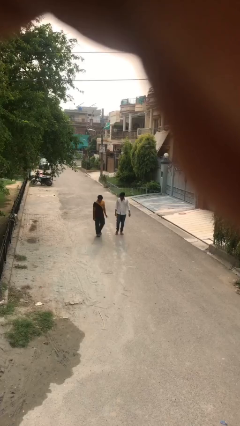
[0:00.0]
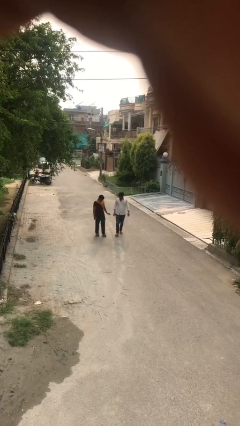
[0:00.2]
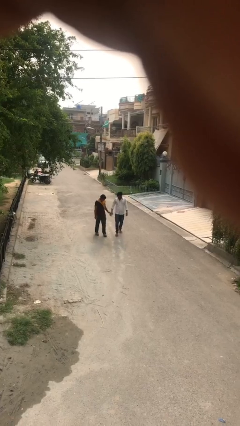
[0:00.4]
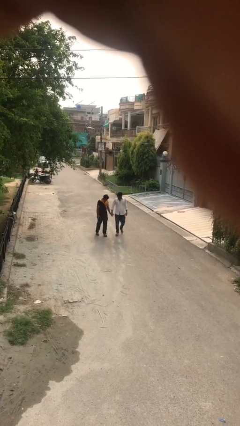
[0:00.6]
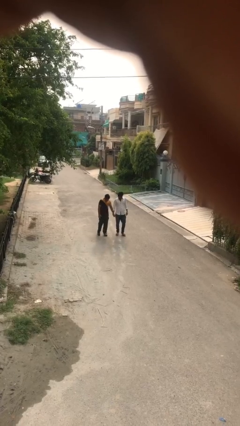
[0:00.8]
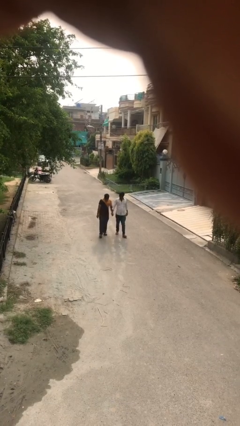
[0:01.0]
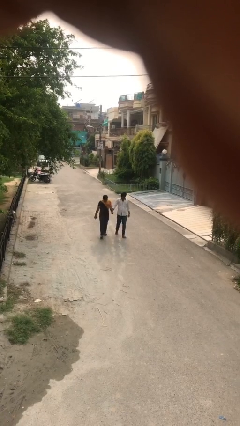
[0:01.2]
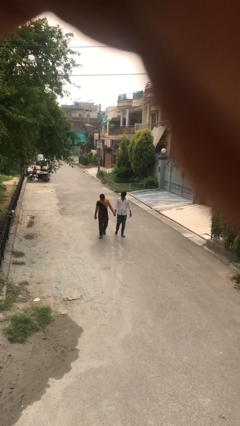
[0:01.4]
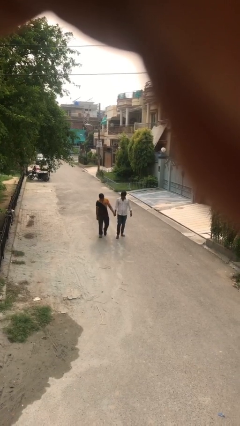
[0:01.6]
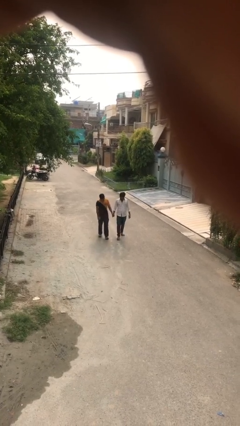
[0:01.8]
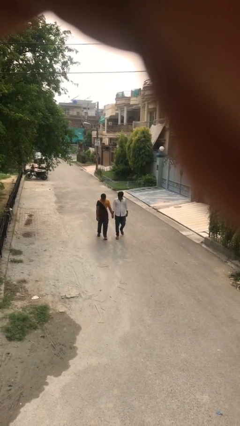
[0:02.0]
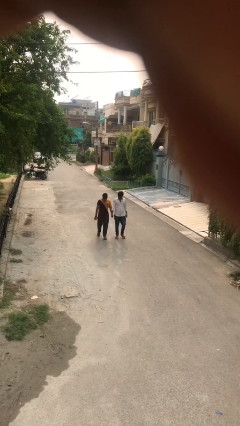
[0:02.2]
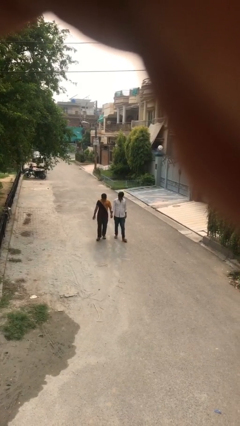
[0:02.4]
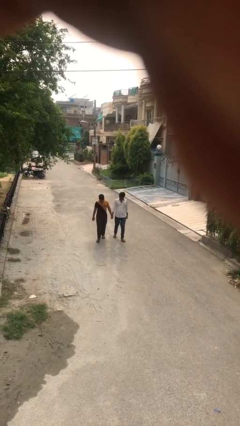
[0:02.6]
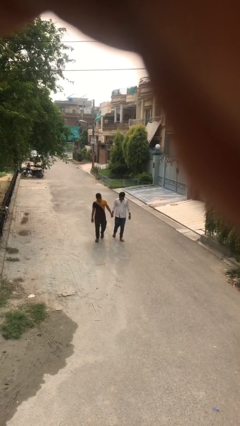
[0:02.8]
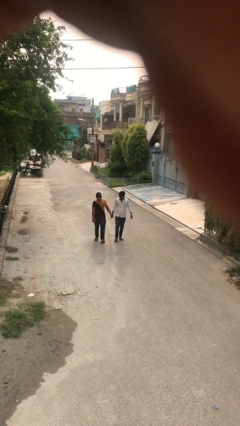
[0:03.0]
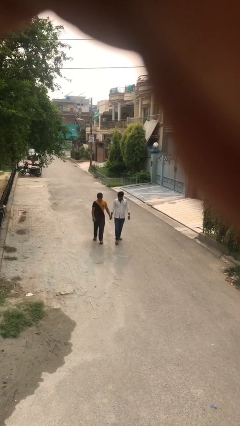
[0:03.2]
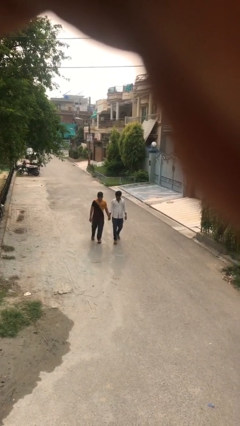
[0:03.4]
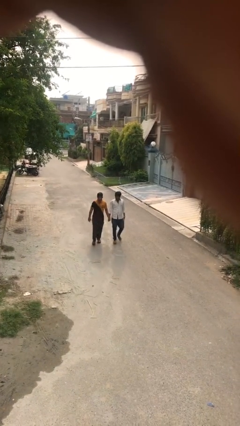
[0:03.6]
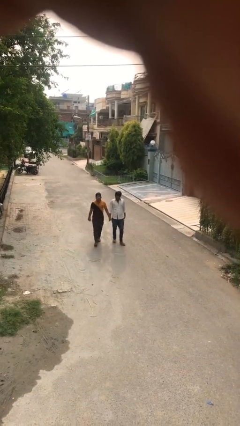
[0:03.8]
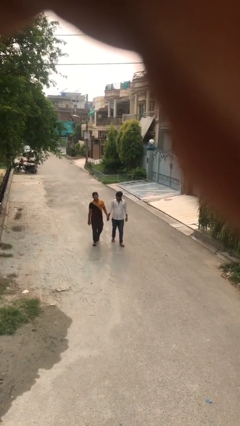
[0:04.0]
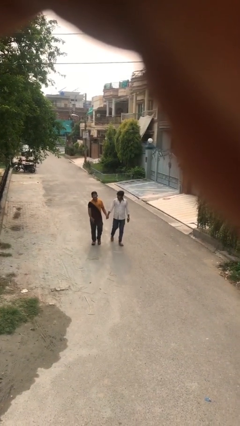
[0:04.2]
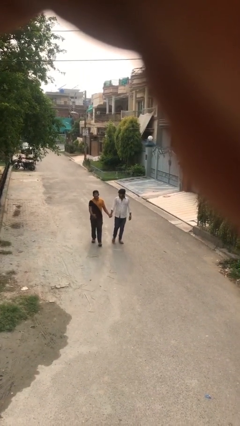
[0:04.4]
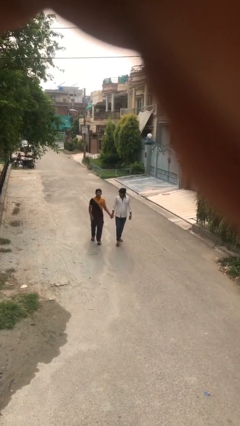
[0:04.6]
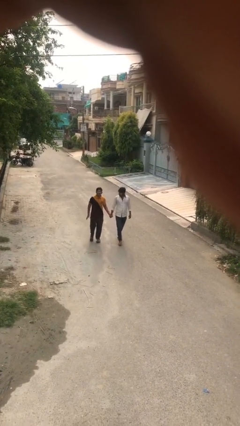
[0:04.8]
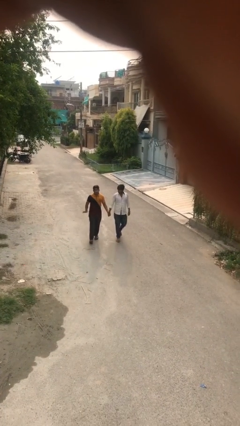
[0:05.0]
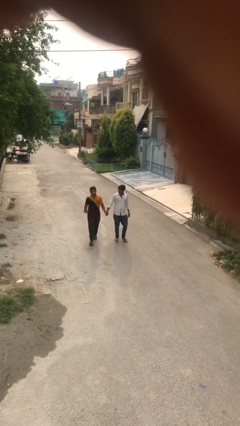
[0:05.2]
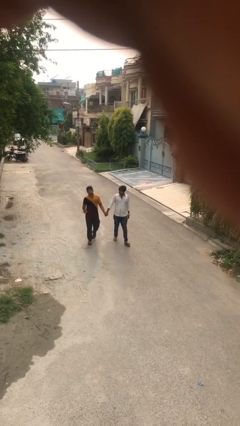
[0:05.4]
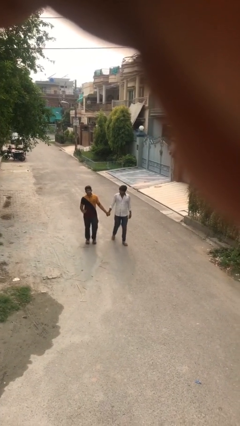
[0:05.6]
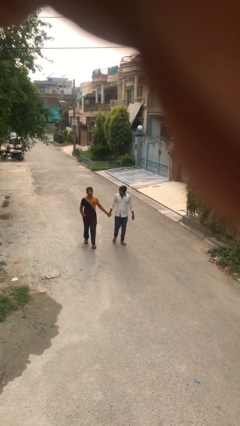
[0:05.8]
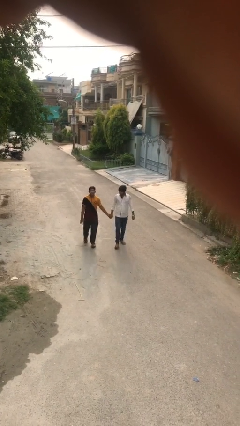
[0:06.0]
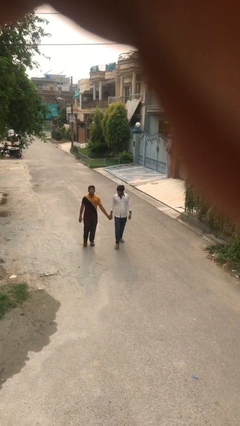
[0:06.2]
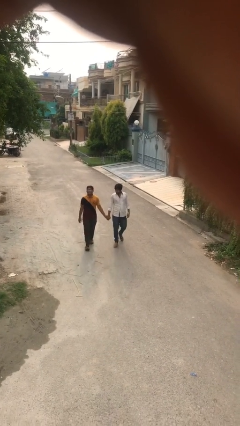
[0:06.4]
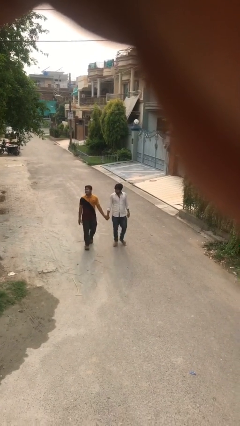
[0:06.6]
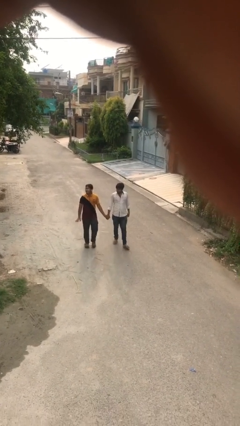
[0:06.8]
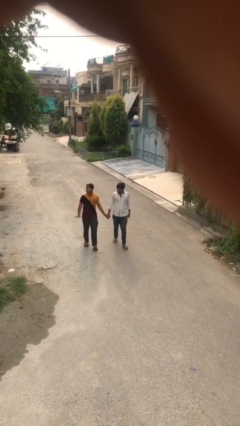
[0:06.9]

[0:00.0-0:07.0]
person holds hand

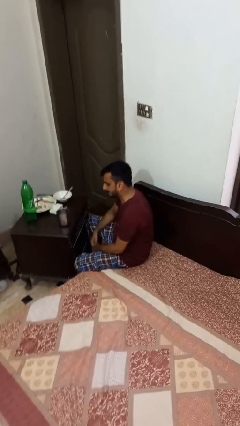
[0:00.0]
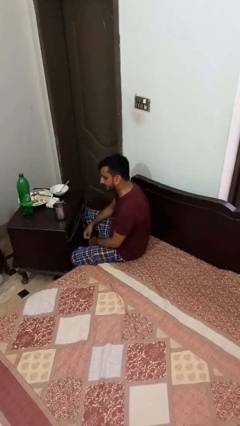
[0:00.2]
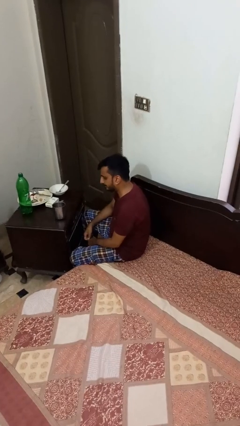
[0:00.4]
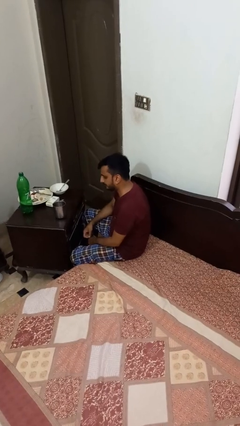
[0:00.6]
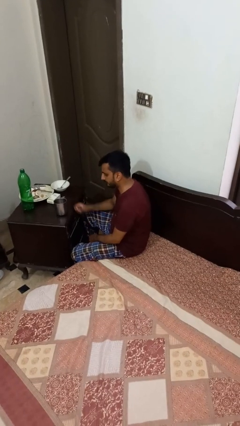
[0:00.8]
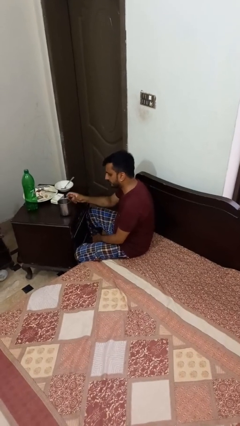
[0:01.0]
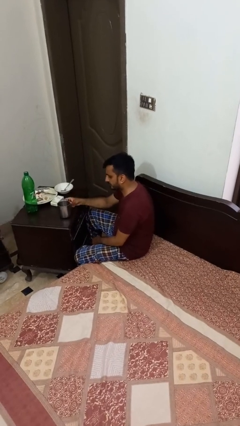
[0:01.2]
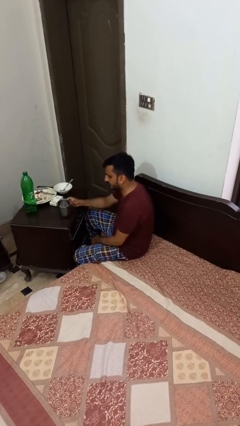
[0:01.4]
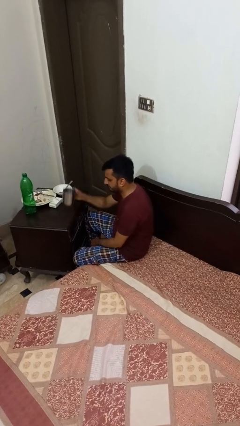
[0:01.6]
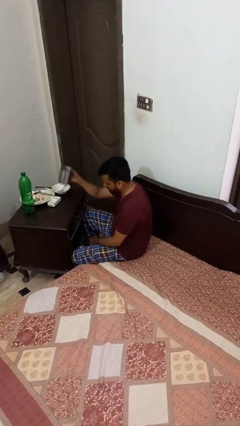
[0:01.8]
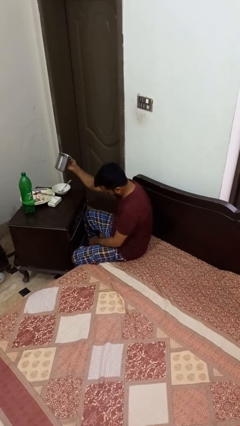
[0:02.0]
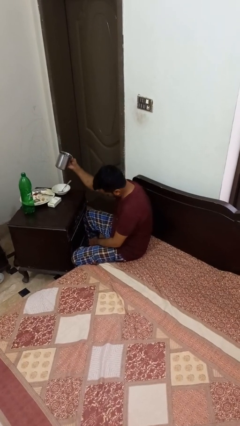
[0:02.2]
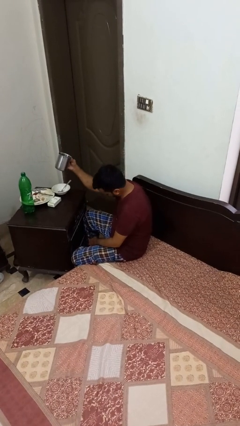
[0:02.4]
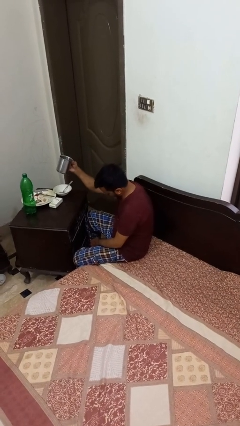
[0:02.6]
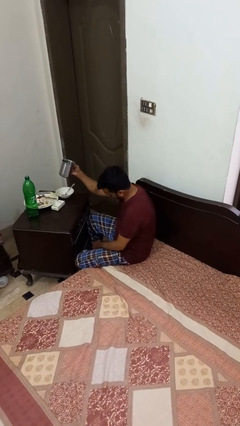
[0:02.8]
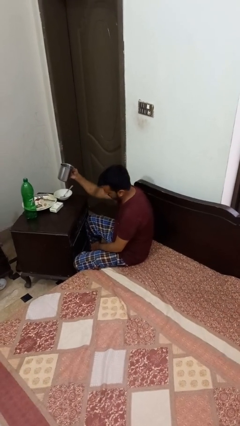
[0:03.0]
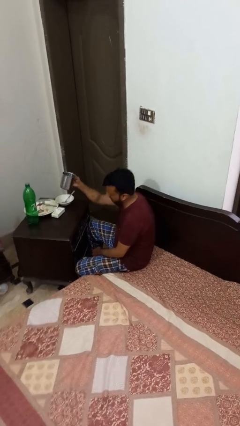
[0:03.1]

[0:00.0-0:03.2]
person picks up object from table

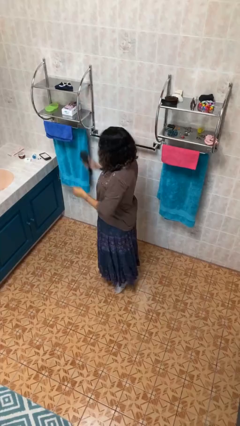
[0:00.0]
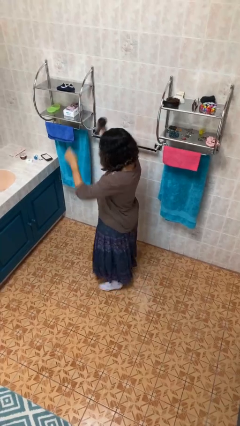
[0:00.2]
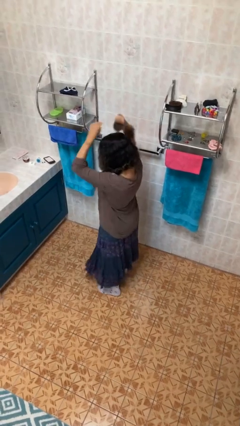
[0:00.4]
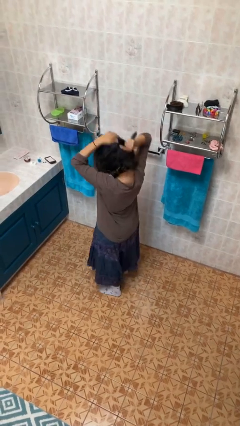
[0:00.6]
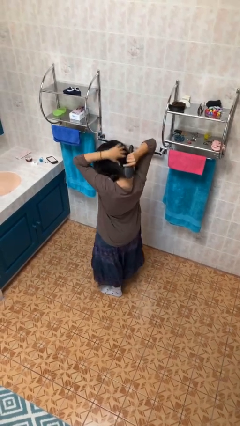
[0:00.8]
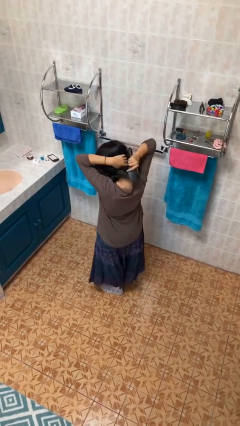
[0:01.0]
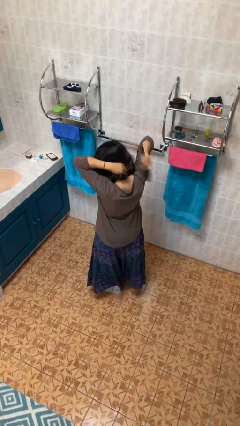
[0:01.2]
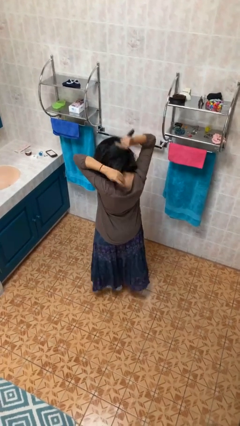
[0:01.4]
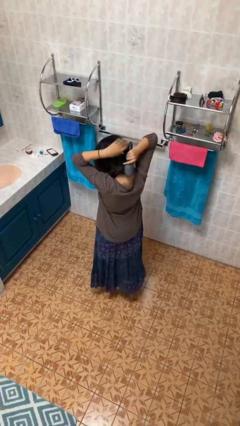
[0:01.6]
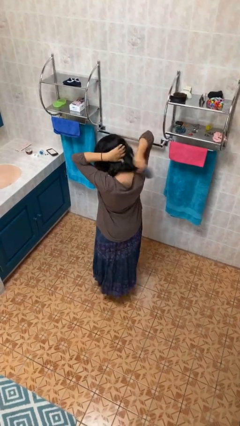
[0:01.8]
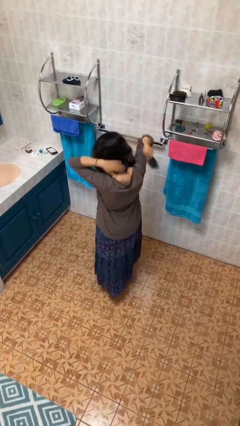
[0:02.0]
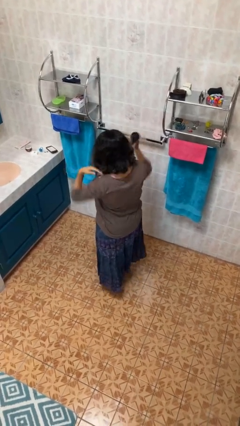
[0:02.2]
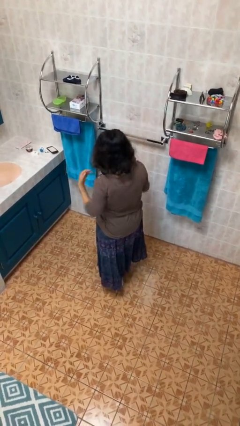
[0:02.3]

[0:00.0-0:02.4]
person brushes hair

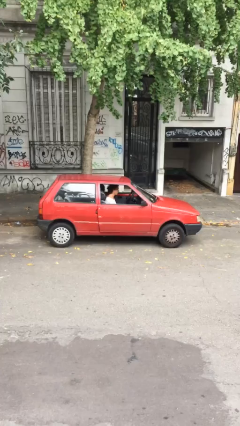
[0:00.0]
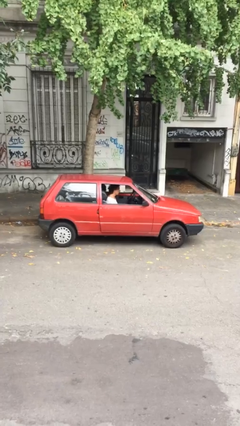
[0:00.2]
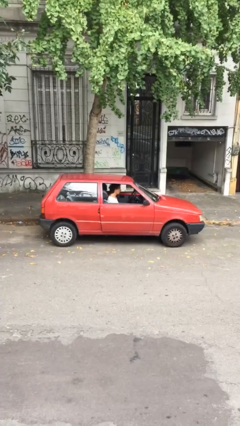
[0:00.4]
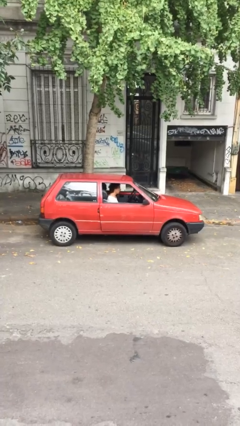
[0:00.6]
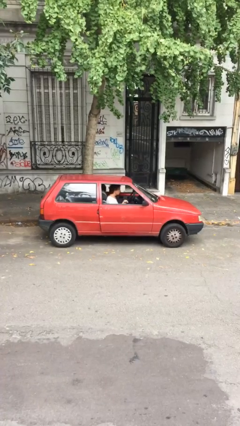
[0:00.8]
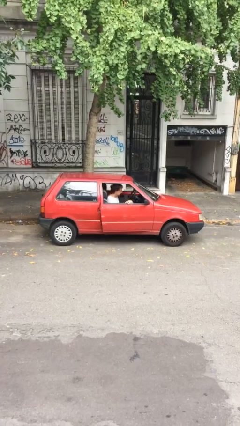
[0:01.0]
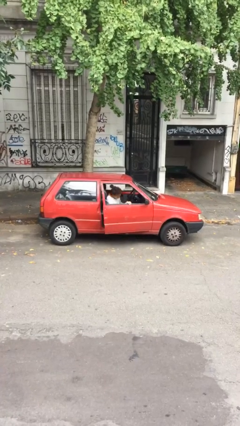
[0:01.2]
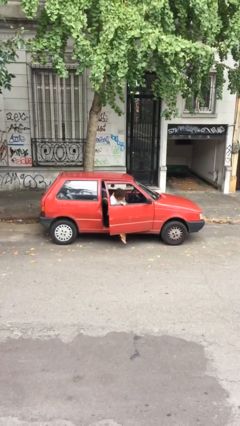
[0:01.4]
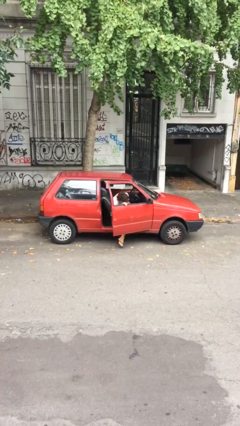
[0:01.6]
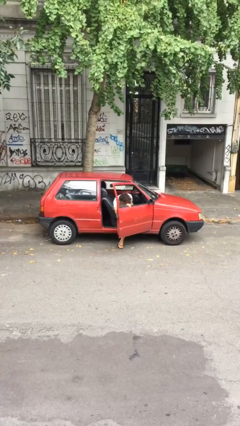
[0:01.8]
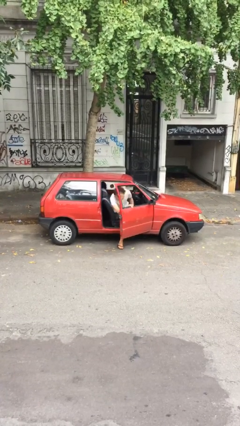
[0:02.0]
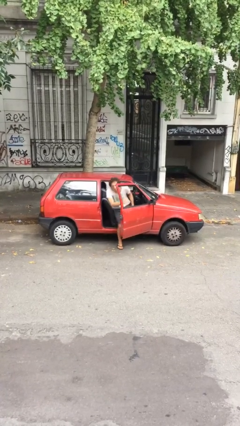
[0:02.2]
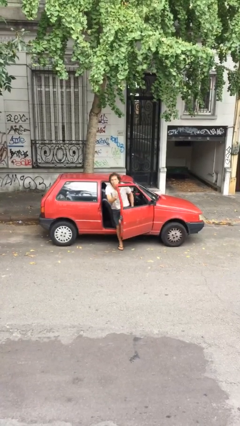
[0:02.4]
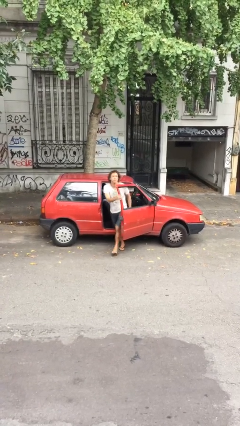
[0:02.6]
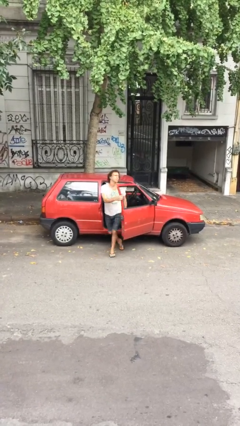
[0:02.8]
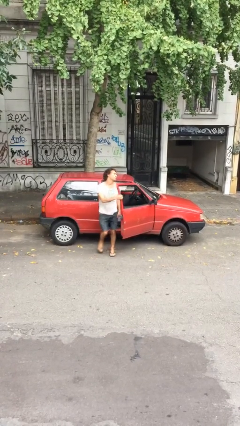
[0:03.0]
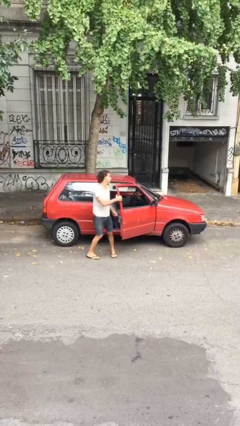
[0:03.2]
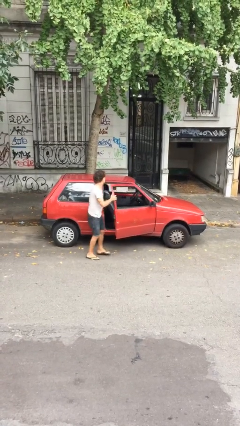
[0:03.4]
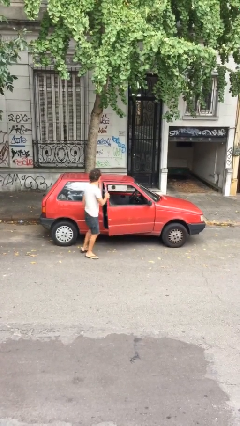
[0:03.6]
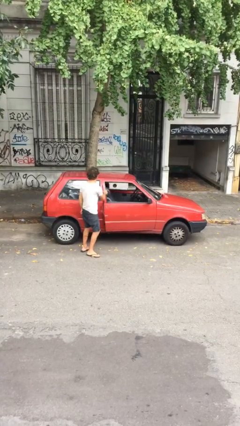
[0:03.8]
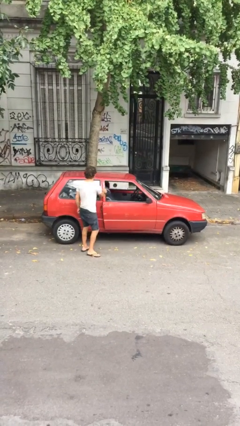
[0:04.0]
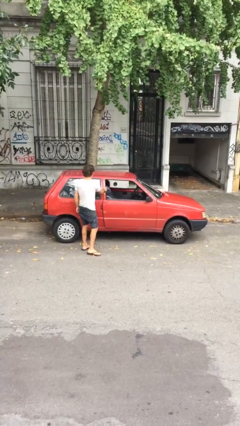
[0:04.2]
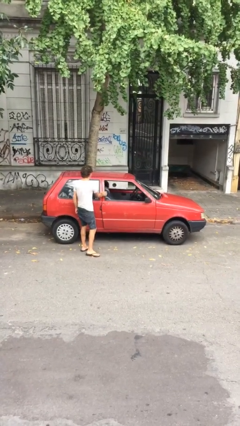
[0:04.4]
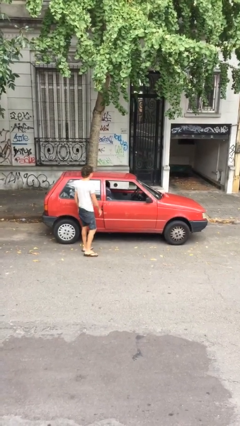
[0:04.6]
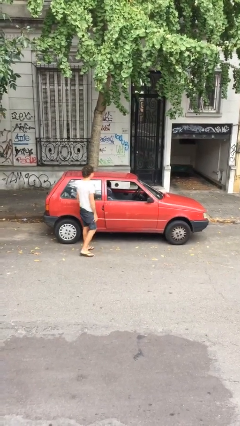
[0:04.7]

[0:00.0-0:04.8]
car drops off person

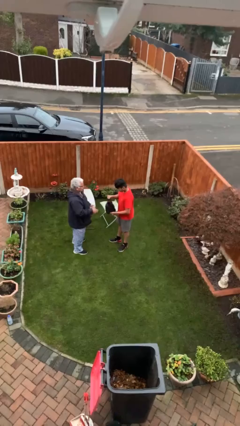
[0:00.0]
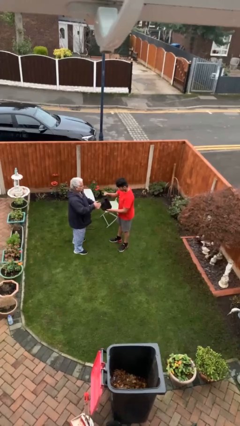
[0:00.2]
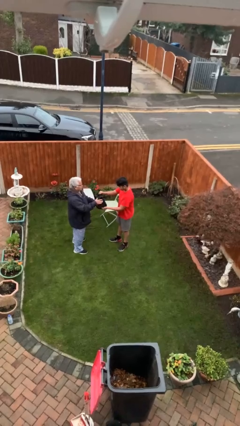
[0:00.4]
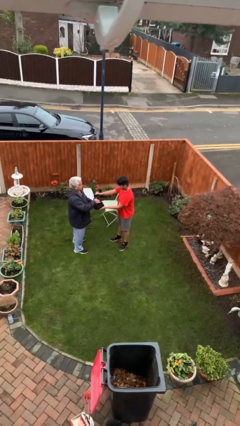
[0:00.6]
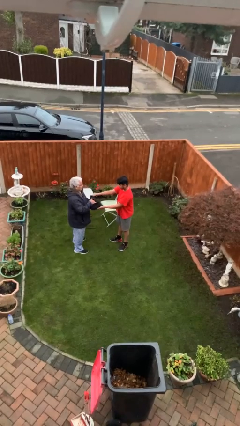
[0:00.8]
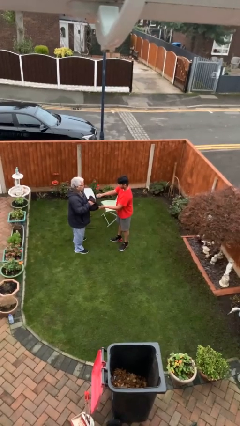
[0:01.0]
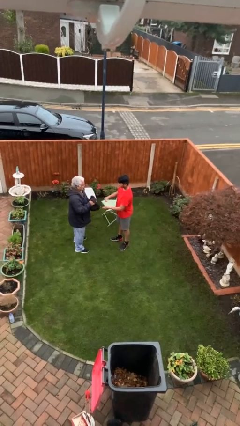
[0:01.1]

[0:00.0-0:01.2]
person transfers object to person
